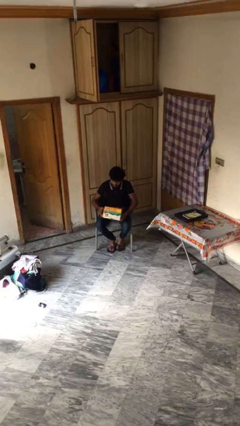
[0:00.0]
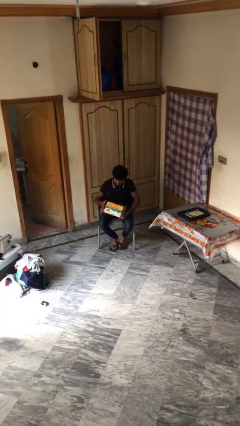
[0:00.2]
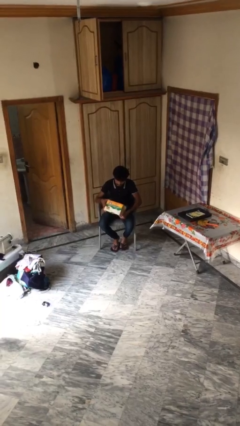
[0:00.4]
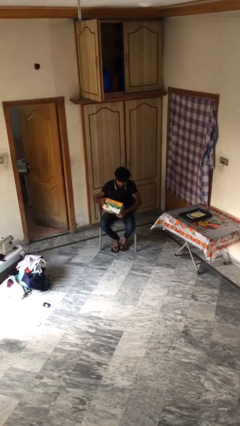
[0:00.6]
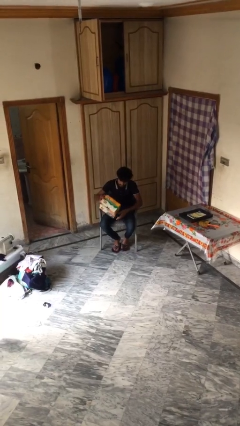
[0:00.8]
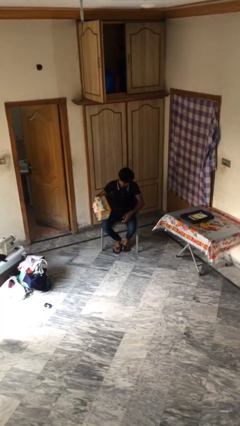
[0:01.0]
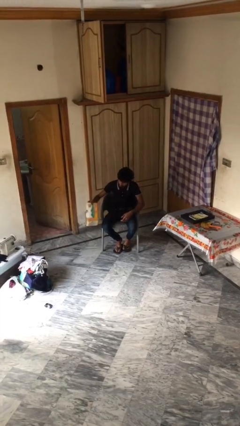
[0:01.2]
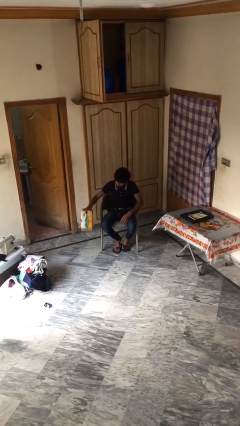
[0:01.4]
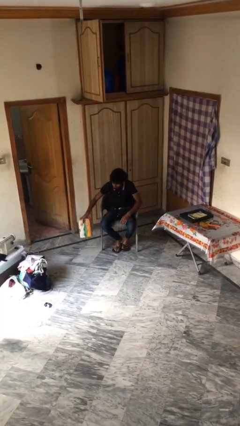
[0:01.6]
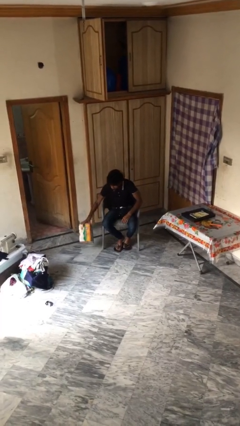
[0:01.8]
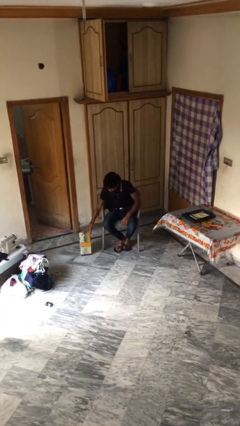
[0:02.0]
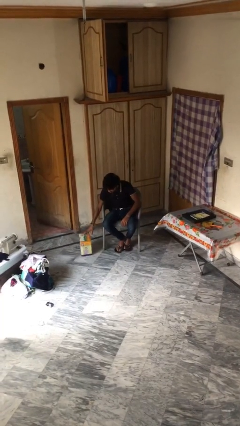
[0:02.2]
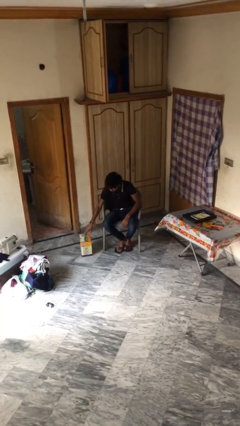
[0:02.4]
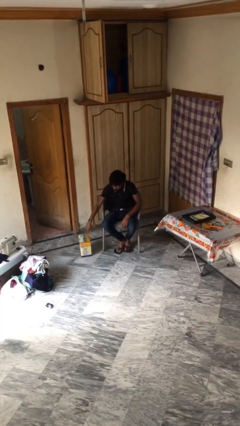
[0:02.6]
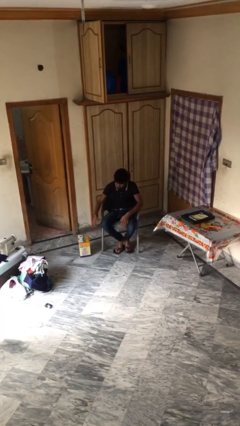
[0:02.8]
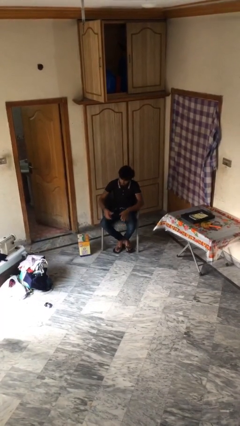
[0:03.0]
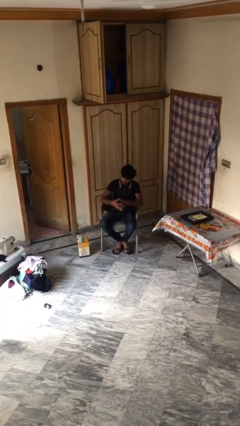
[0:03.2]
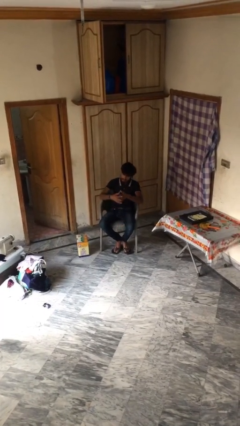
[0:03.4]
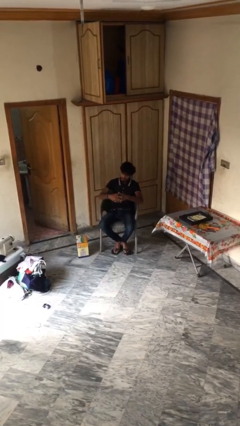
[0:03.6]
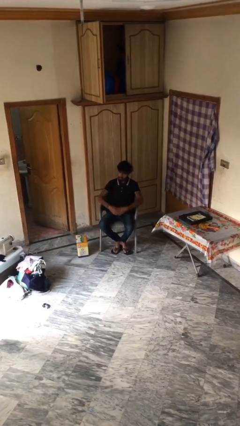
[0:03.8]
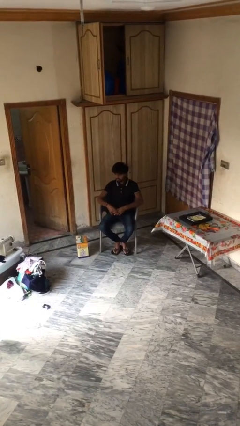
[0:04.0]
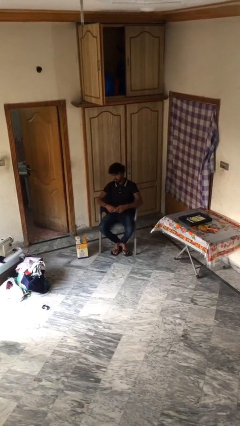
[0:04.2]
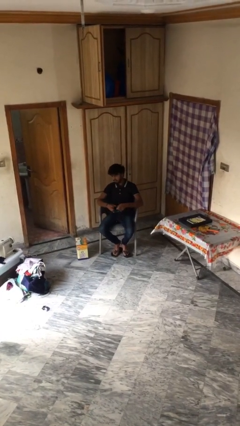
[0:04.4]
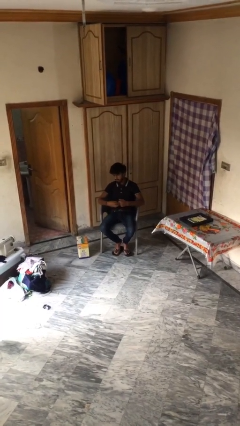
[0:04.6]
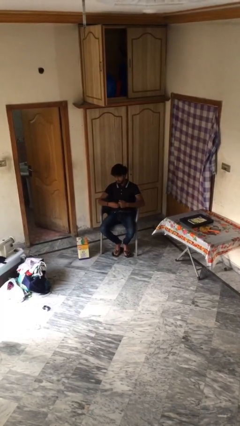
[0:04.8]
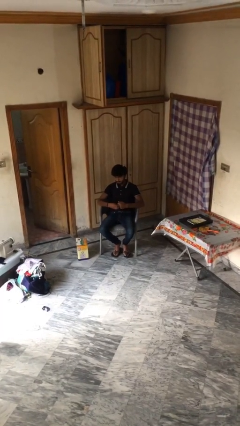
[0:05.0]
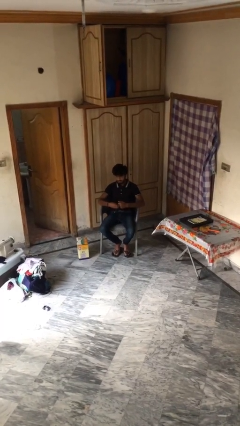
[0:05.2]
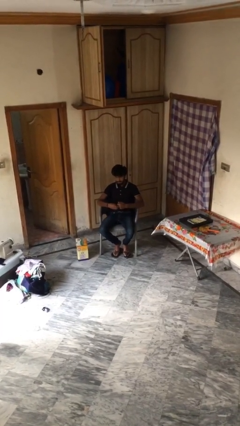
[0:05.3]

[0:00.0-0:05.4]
person puts down object on floor

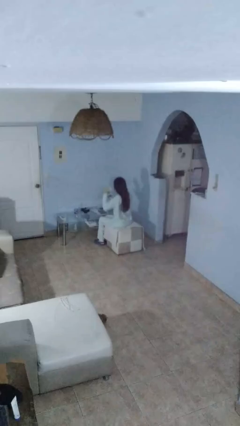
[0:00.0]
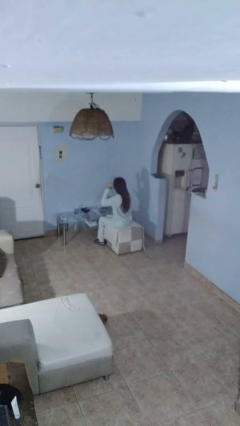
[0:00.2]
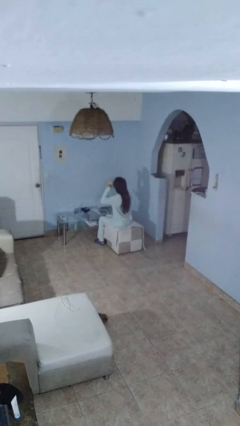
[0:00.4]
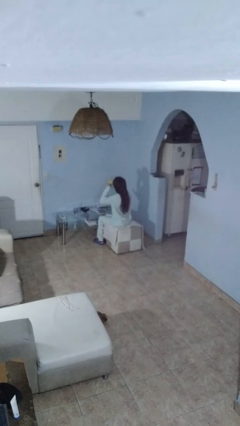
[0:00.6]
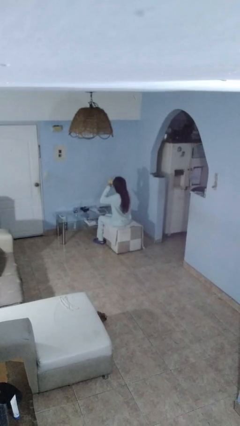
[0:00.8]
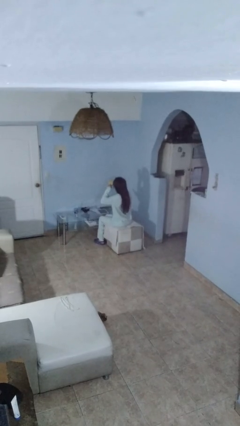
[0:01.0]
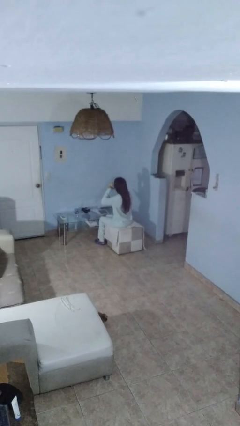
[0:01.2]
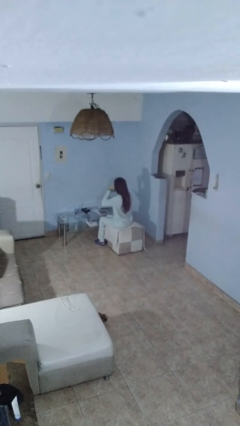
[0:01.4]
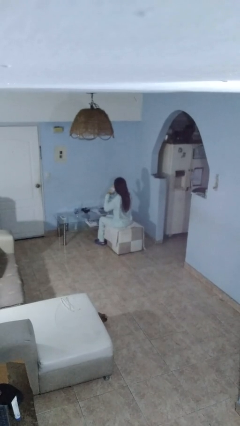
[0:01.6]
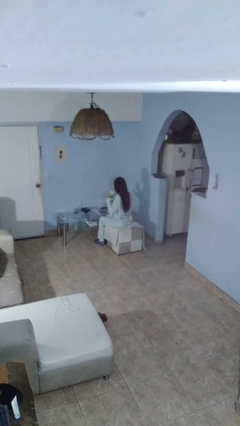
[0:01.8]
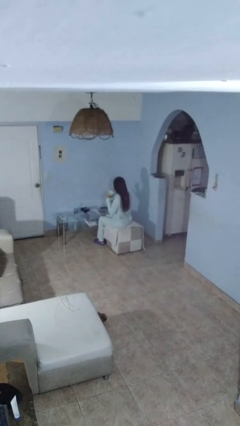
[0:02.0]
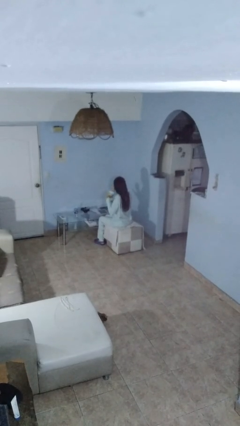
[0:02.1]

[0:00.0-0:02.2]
person drinks from mug

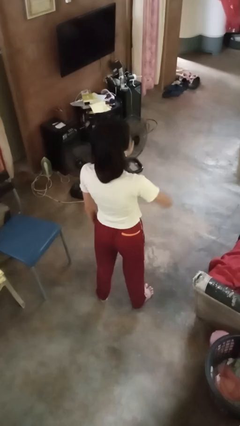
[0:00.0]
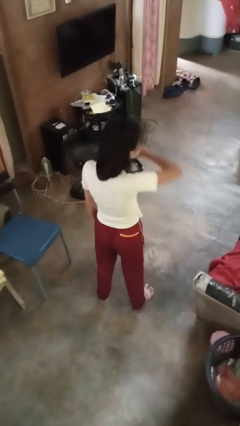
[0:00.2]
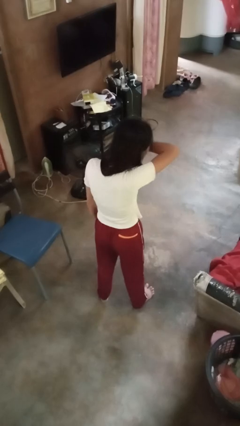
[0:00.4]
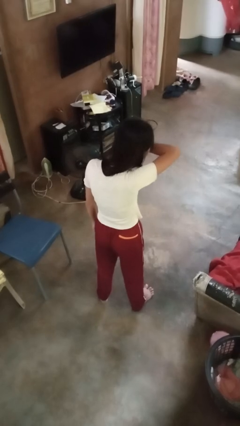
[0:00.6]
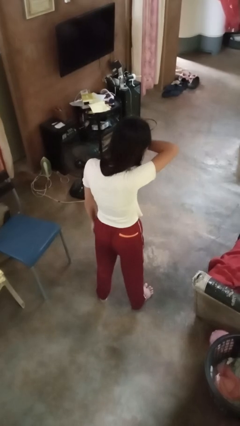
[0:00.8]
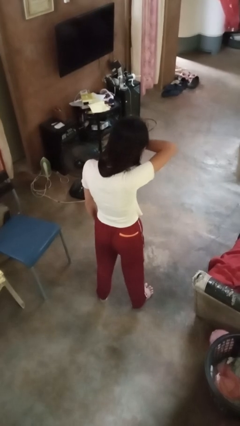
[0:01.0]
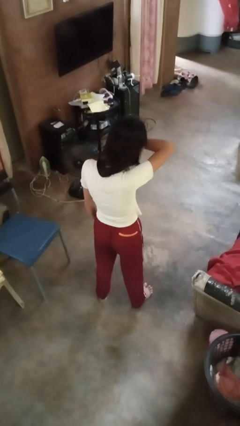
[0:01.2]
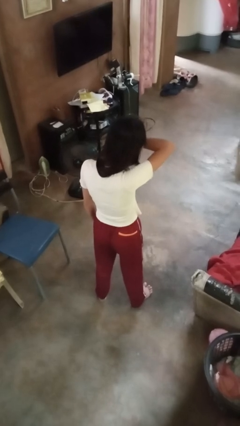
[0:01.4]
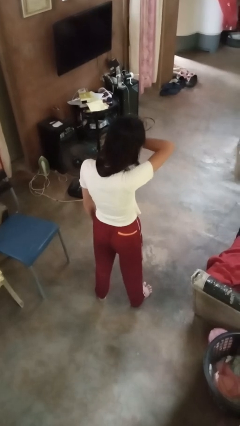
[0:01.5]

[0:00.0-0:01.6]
person sneezes into arm

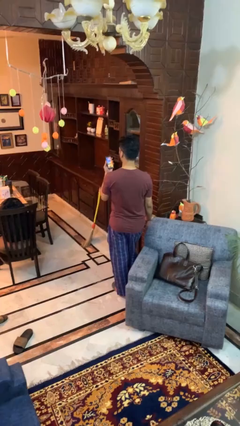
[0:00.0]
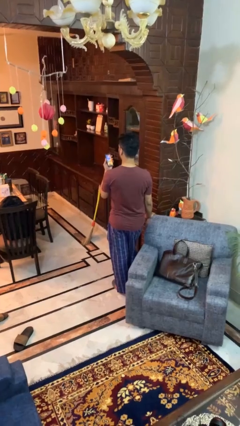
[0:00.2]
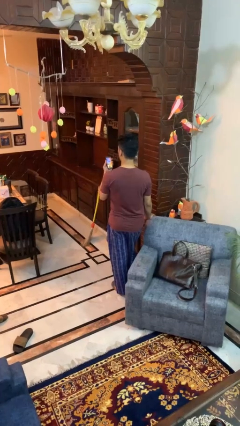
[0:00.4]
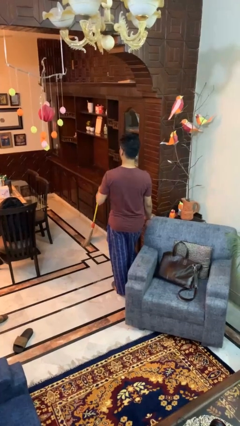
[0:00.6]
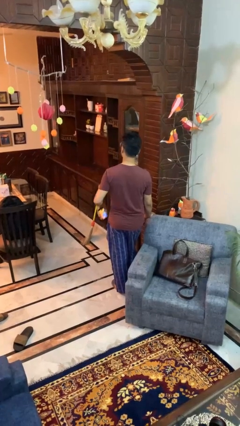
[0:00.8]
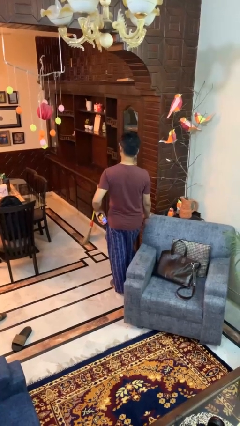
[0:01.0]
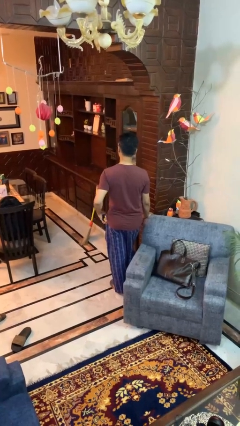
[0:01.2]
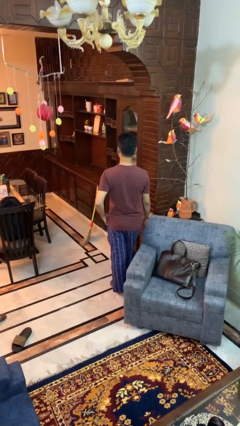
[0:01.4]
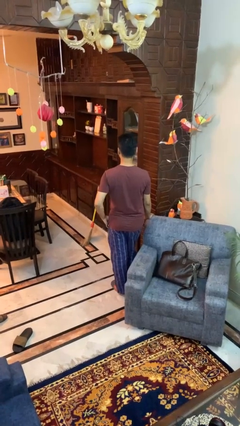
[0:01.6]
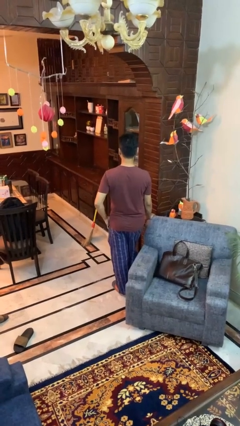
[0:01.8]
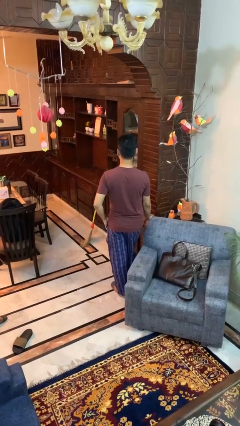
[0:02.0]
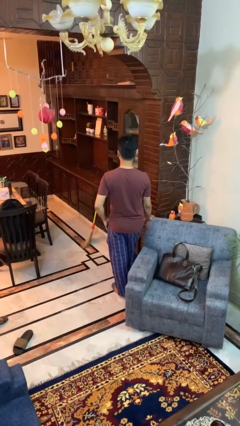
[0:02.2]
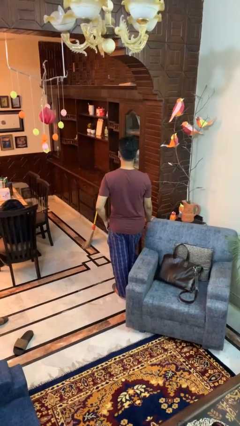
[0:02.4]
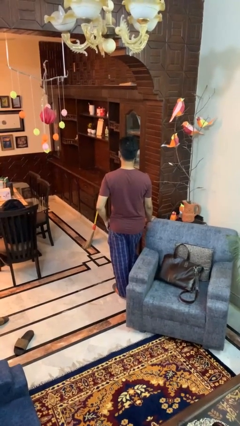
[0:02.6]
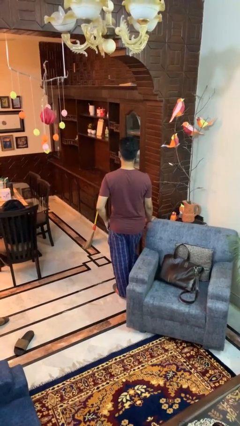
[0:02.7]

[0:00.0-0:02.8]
person puts phone into pocket

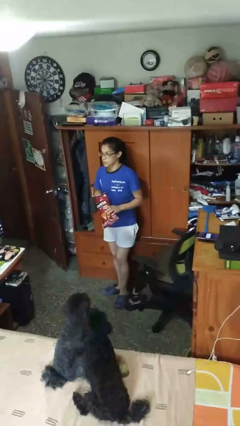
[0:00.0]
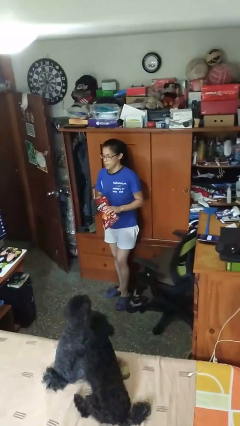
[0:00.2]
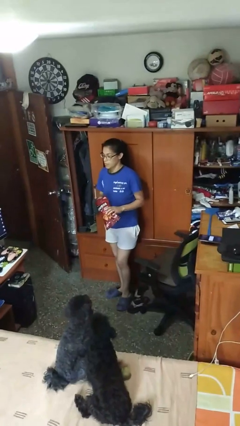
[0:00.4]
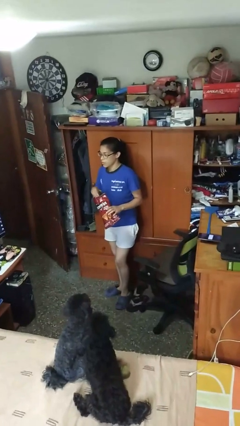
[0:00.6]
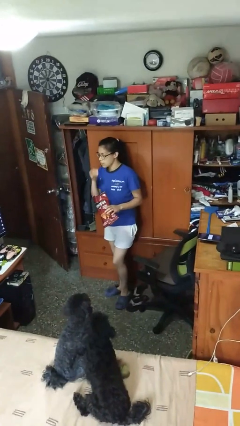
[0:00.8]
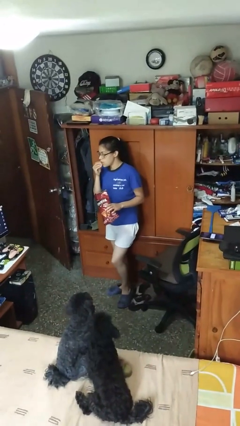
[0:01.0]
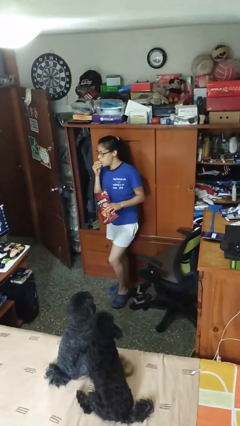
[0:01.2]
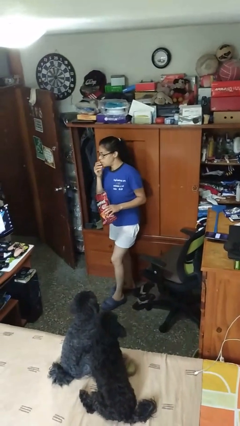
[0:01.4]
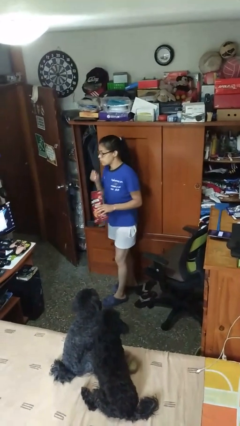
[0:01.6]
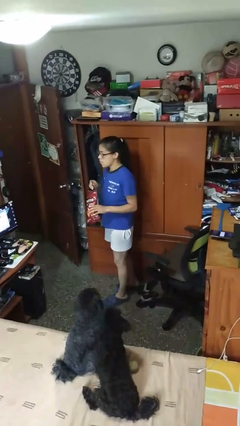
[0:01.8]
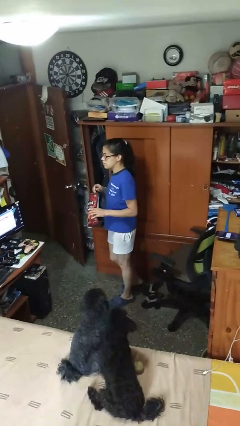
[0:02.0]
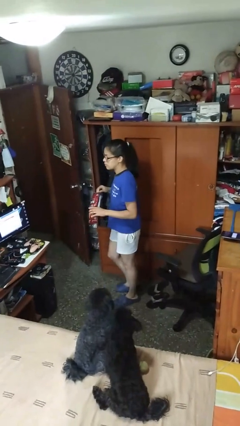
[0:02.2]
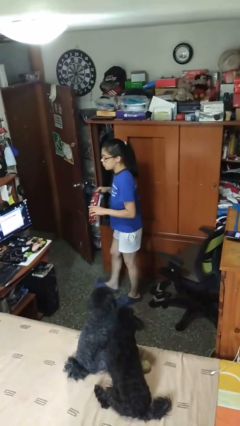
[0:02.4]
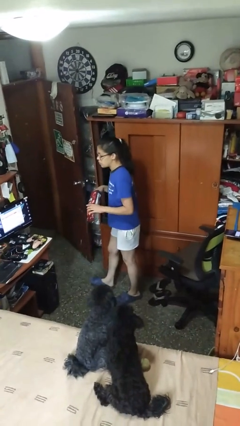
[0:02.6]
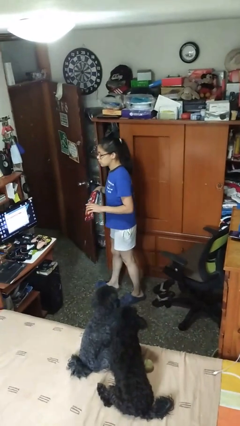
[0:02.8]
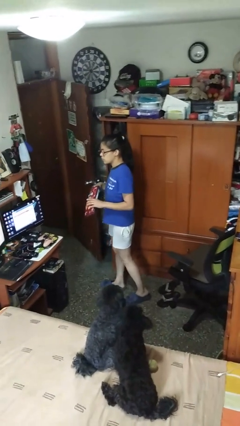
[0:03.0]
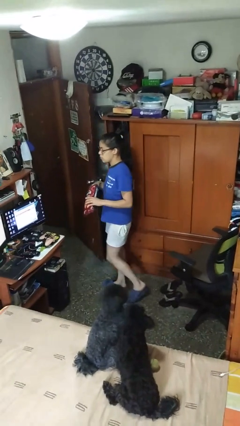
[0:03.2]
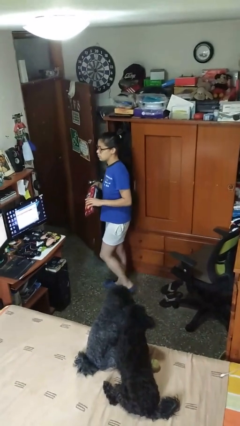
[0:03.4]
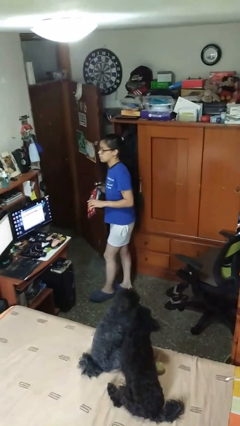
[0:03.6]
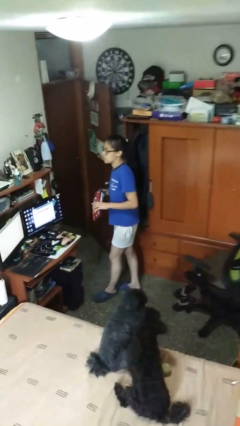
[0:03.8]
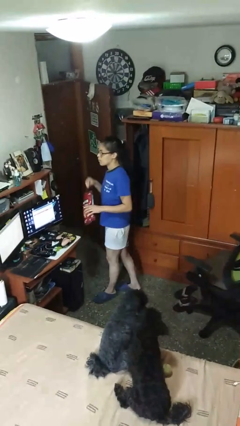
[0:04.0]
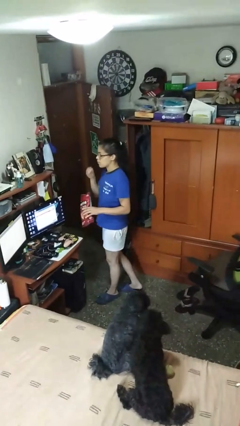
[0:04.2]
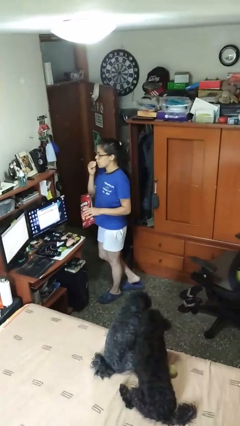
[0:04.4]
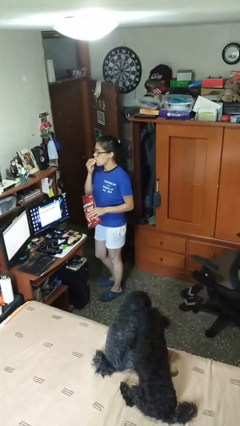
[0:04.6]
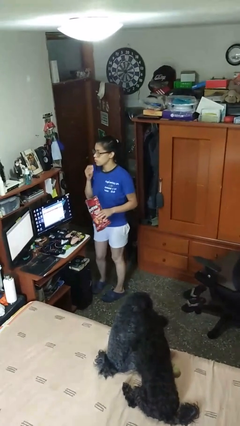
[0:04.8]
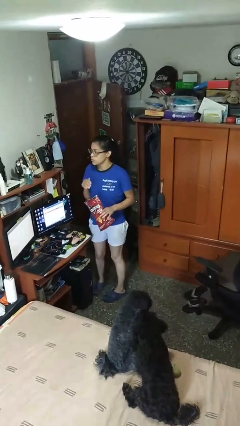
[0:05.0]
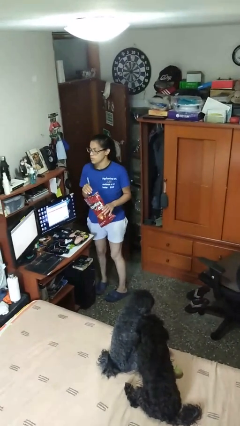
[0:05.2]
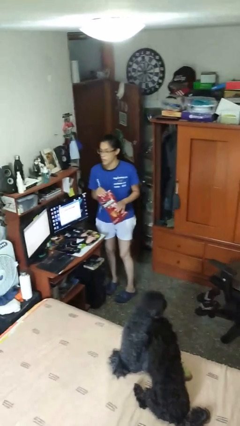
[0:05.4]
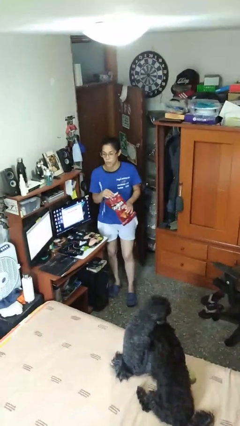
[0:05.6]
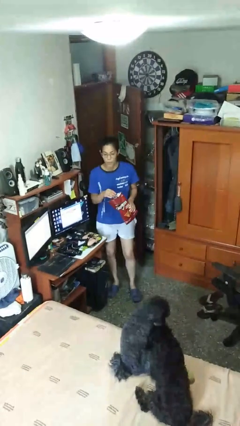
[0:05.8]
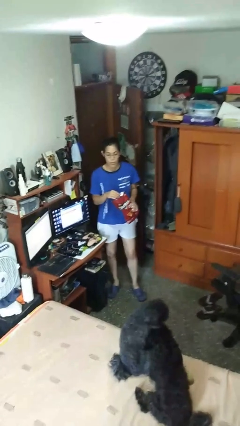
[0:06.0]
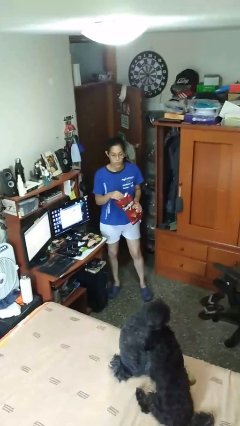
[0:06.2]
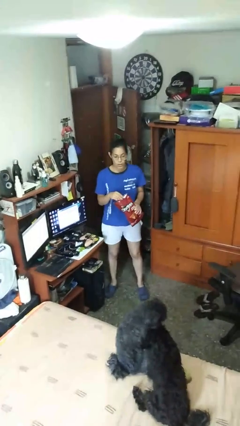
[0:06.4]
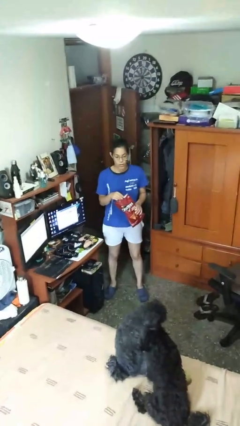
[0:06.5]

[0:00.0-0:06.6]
person eats snack from bag
